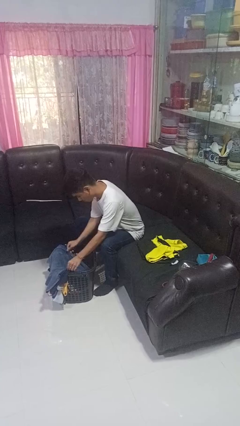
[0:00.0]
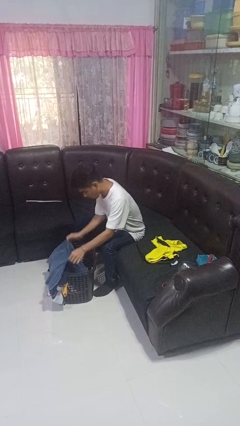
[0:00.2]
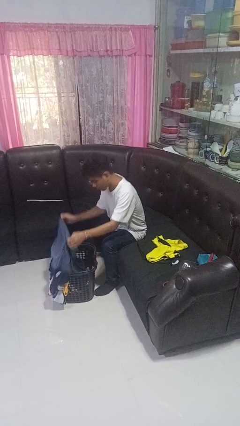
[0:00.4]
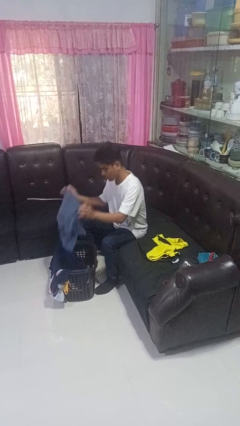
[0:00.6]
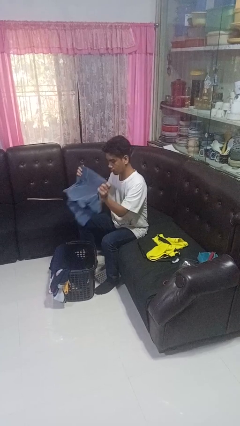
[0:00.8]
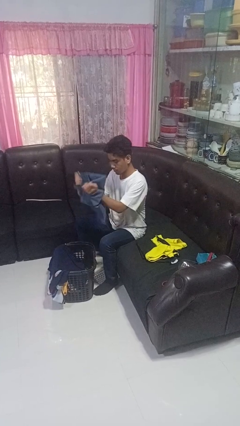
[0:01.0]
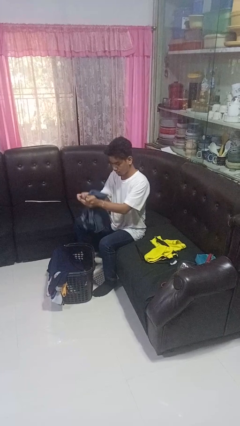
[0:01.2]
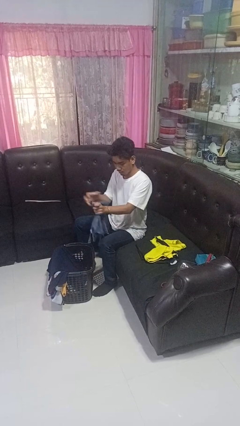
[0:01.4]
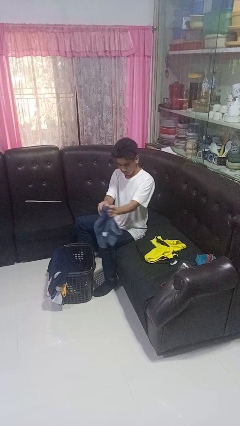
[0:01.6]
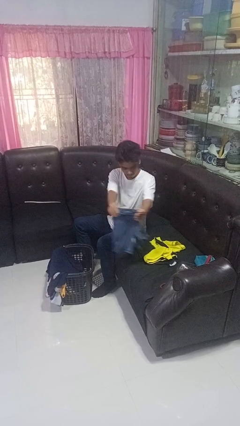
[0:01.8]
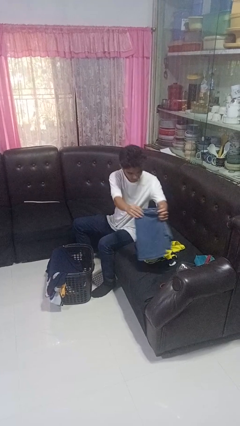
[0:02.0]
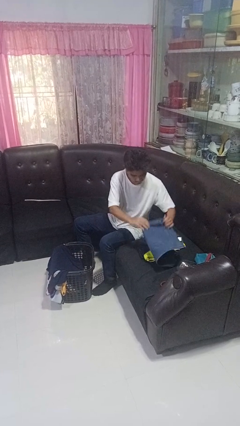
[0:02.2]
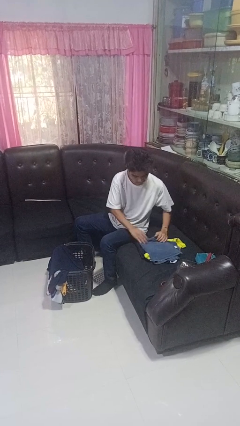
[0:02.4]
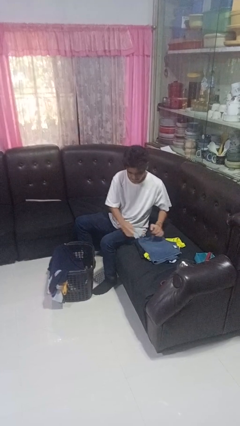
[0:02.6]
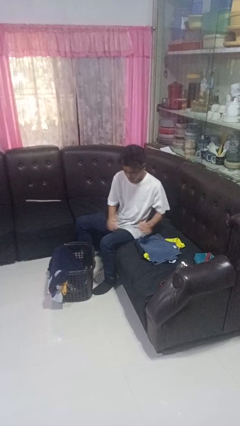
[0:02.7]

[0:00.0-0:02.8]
person folds shirt

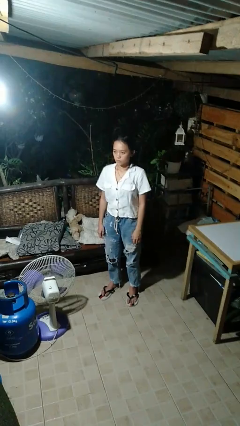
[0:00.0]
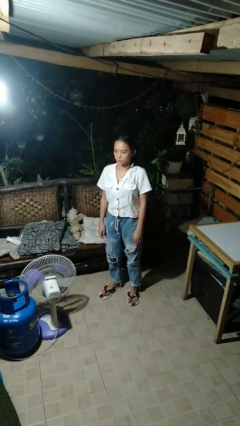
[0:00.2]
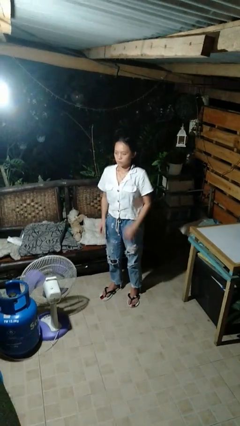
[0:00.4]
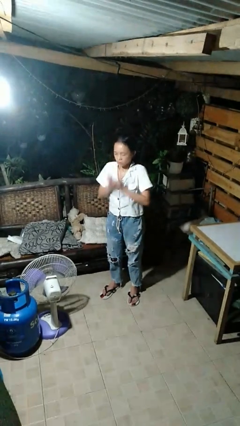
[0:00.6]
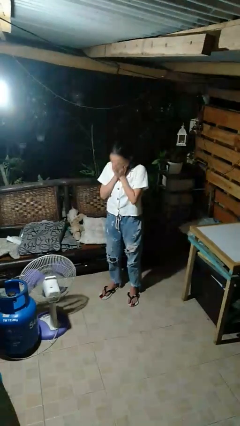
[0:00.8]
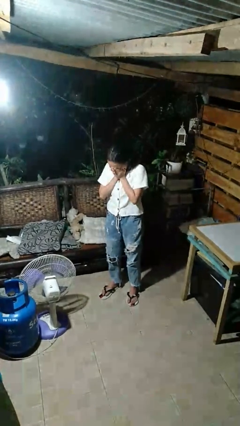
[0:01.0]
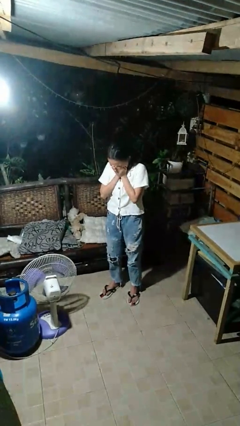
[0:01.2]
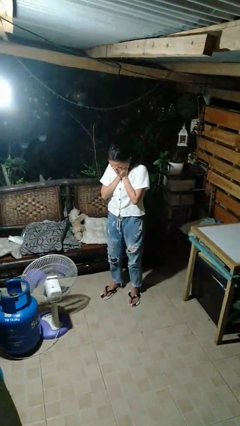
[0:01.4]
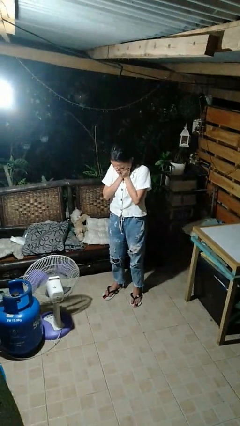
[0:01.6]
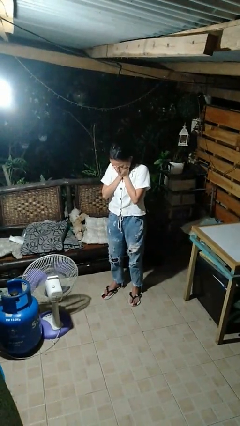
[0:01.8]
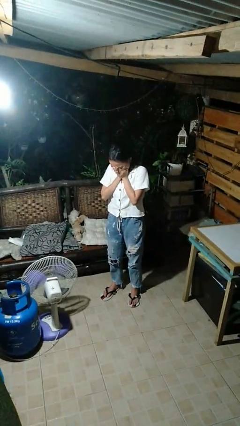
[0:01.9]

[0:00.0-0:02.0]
person sneezes into hand

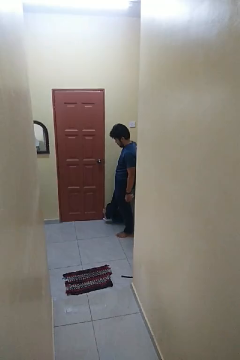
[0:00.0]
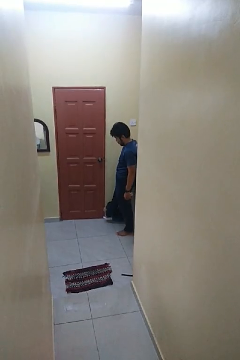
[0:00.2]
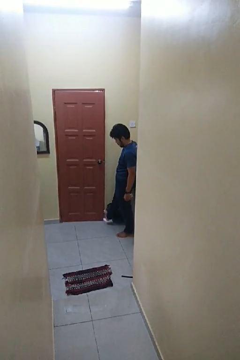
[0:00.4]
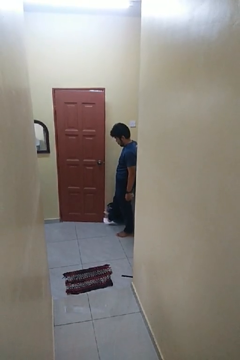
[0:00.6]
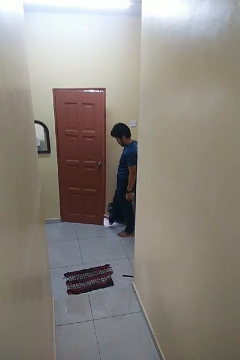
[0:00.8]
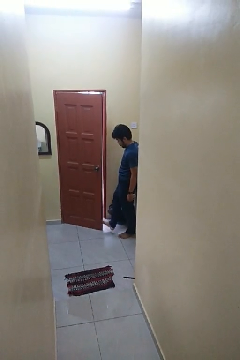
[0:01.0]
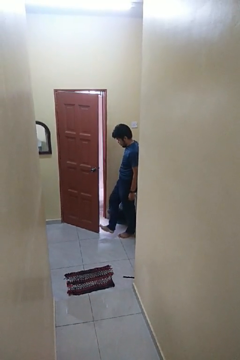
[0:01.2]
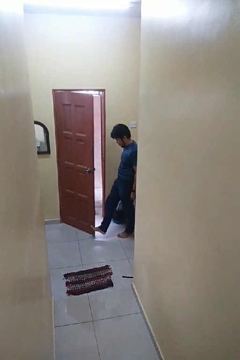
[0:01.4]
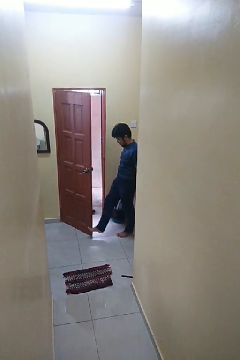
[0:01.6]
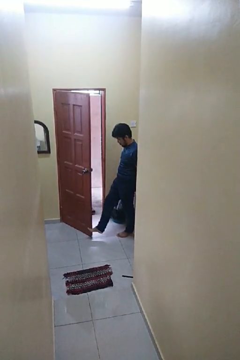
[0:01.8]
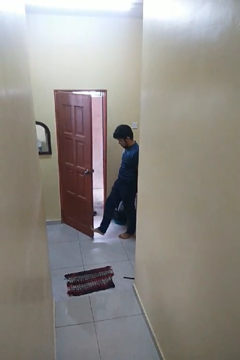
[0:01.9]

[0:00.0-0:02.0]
person opens facility door

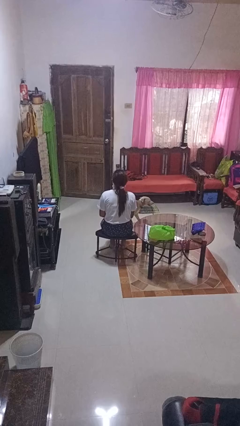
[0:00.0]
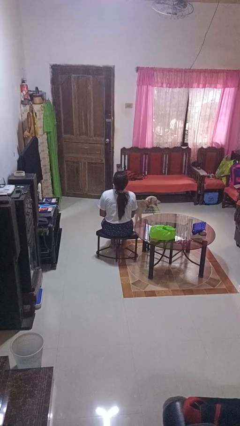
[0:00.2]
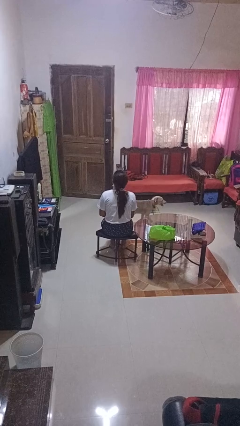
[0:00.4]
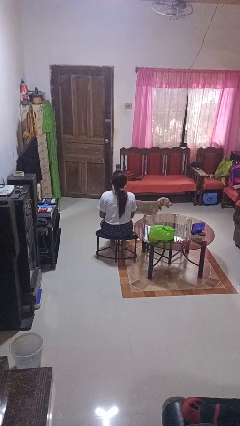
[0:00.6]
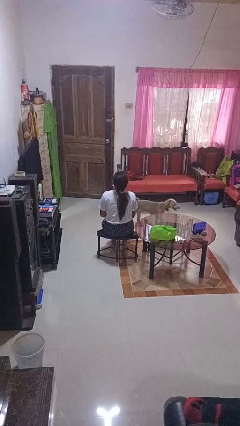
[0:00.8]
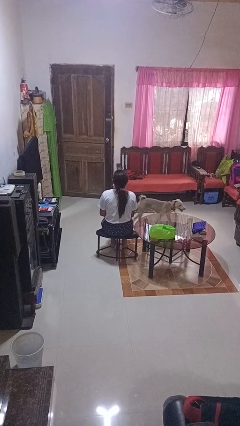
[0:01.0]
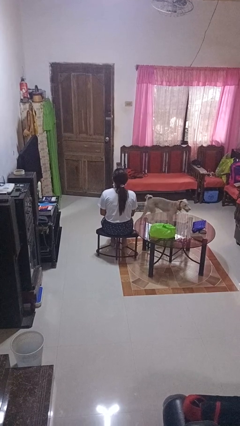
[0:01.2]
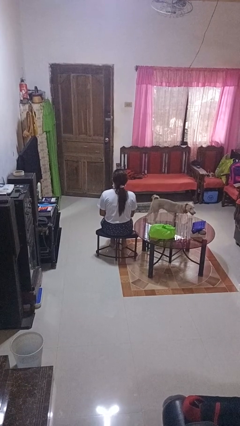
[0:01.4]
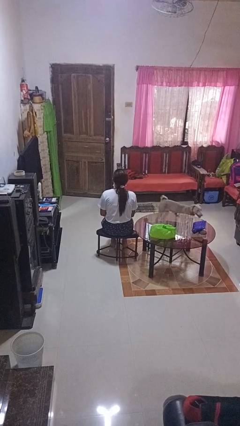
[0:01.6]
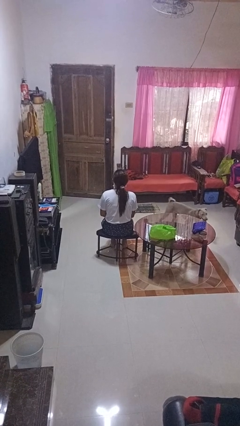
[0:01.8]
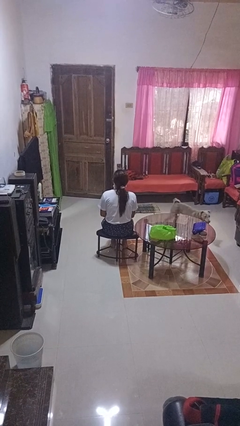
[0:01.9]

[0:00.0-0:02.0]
person nods head

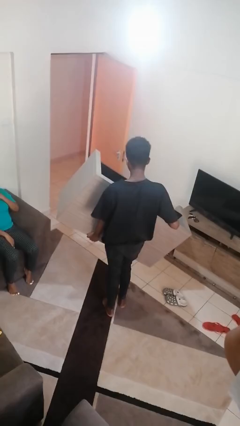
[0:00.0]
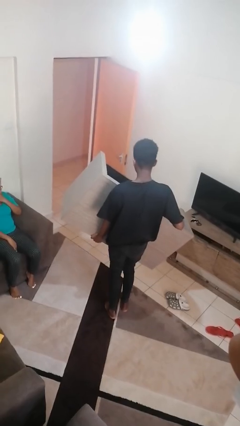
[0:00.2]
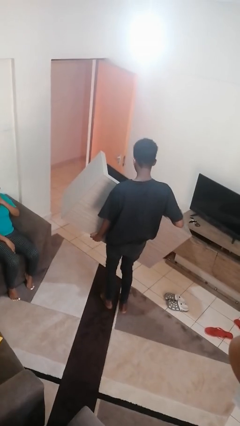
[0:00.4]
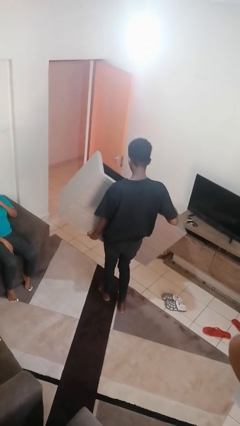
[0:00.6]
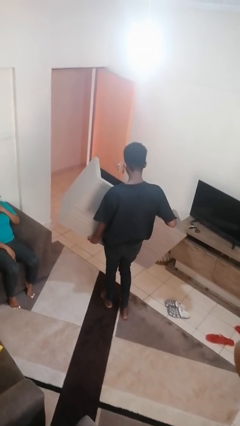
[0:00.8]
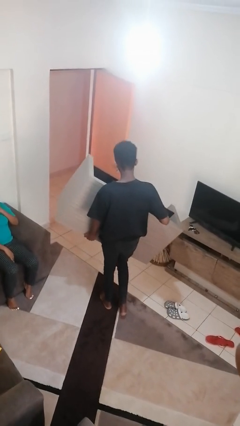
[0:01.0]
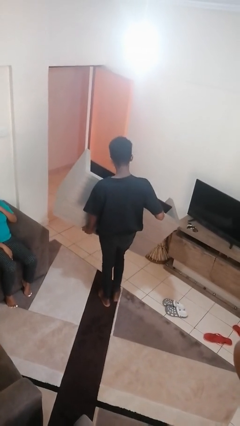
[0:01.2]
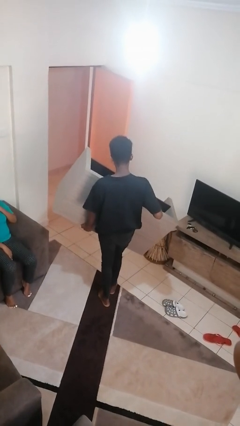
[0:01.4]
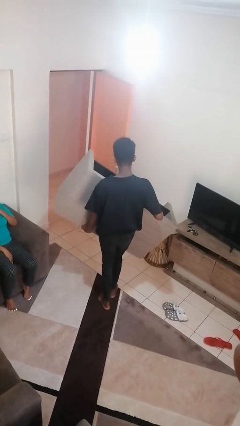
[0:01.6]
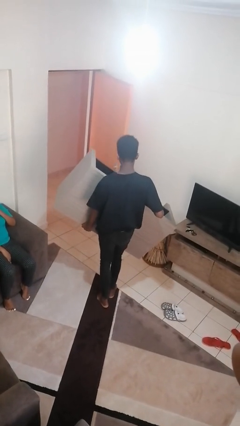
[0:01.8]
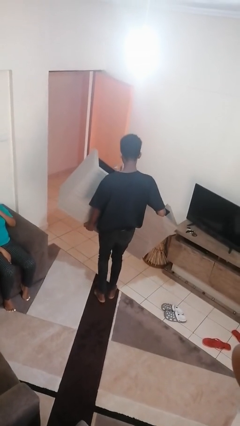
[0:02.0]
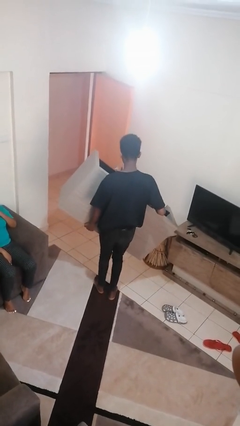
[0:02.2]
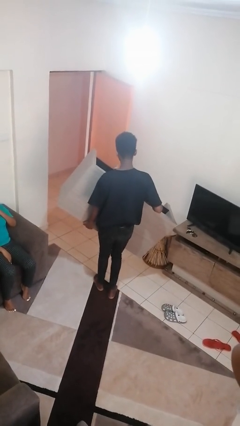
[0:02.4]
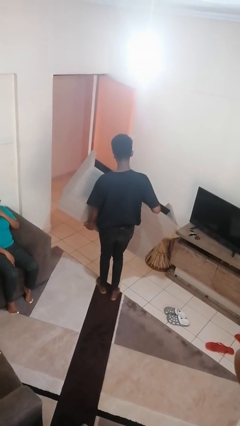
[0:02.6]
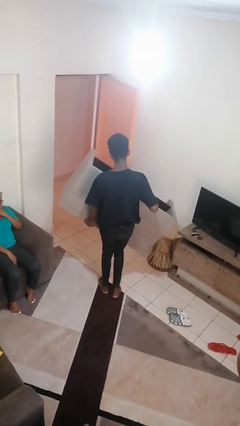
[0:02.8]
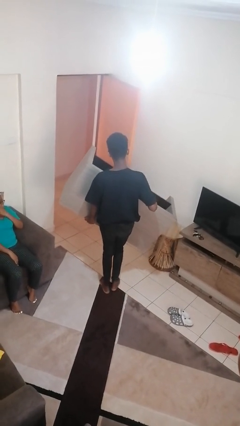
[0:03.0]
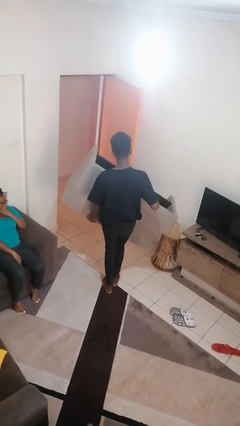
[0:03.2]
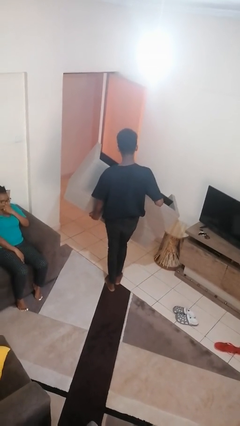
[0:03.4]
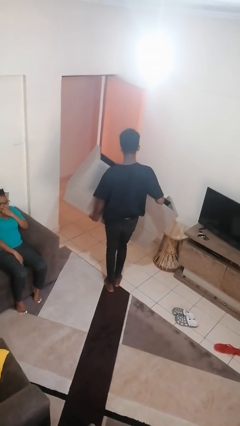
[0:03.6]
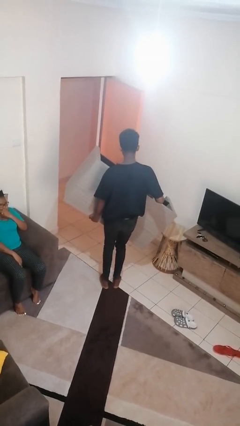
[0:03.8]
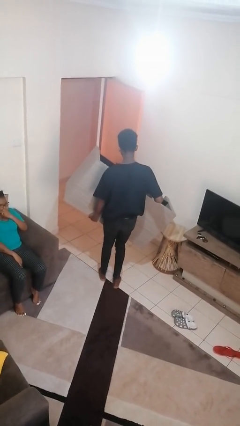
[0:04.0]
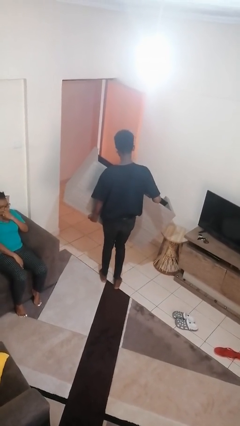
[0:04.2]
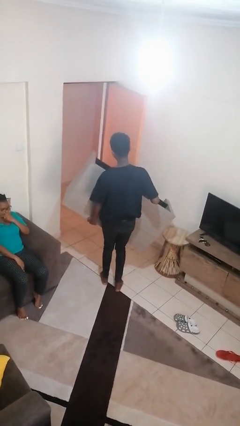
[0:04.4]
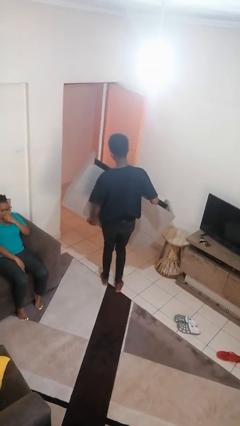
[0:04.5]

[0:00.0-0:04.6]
person carries furniture

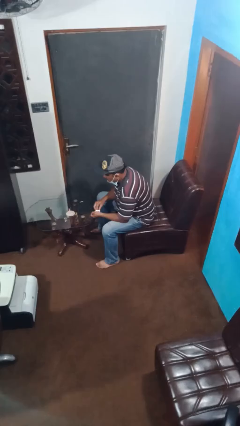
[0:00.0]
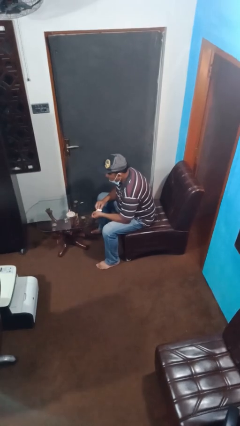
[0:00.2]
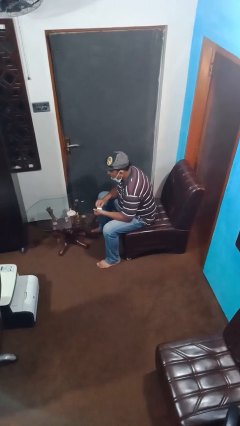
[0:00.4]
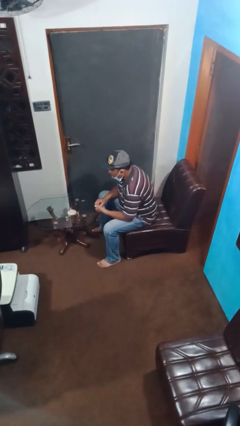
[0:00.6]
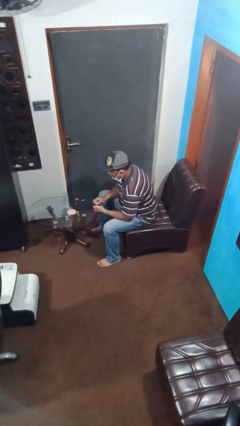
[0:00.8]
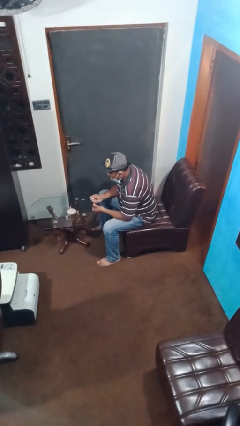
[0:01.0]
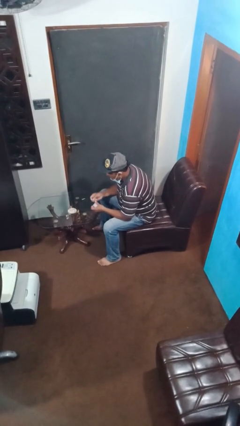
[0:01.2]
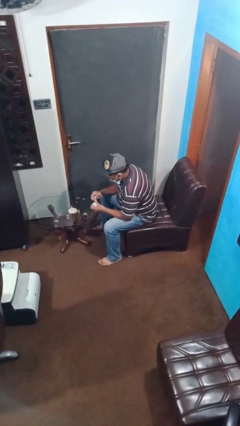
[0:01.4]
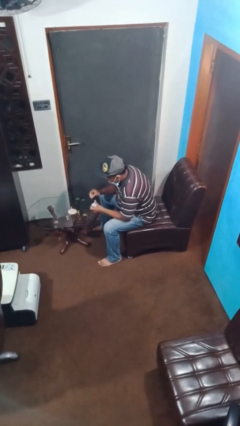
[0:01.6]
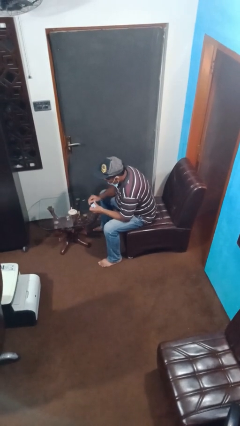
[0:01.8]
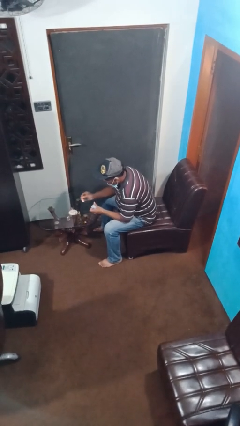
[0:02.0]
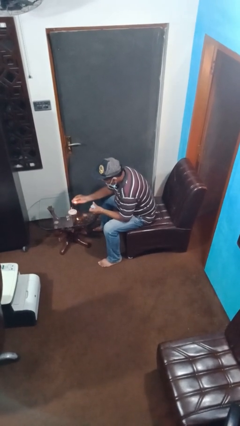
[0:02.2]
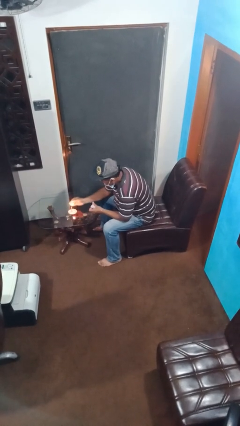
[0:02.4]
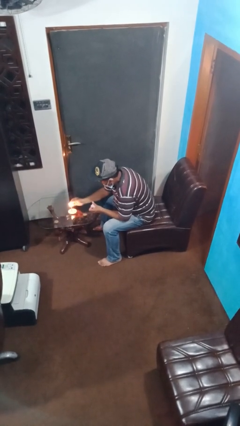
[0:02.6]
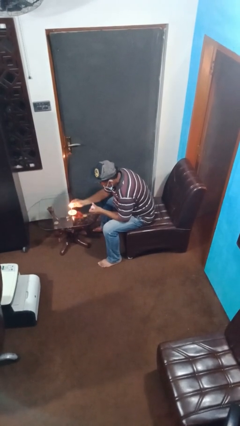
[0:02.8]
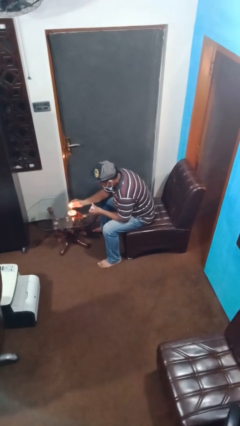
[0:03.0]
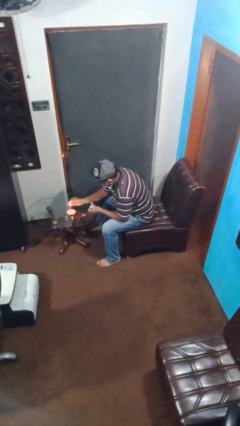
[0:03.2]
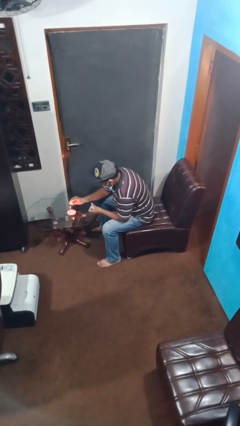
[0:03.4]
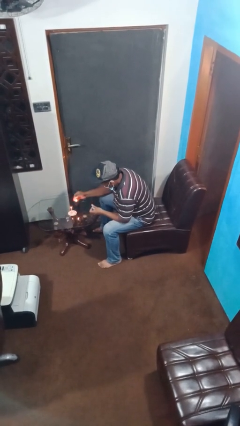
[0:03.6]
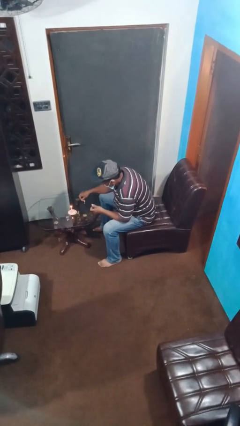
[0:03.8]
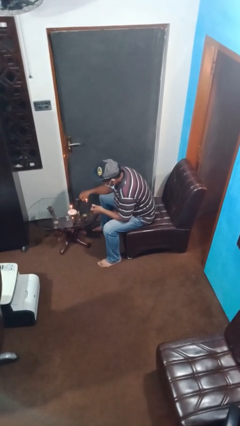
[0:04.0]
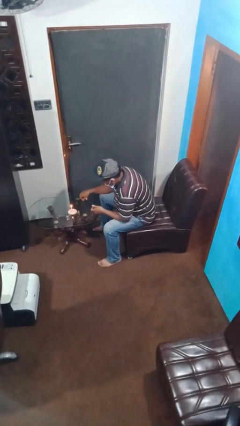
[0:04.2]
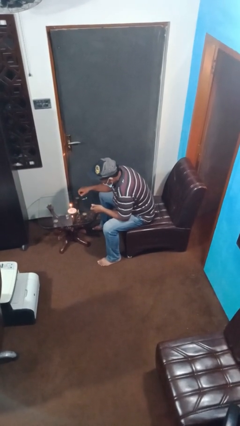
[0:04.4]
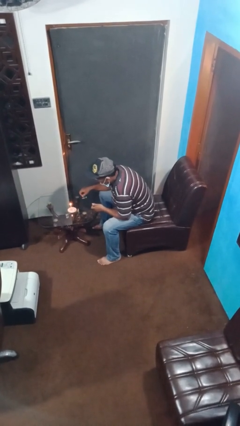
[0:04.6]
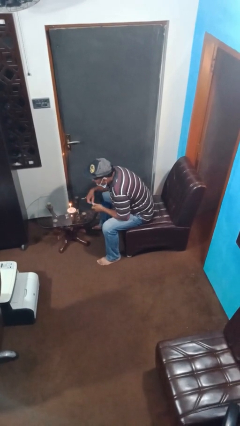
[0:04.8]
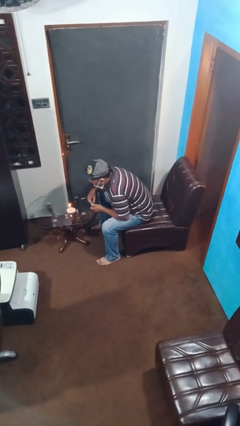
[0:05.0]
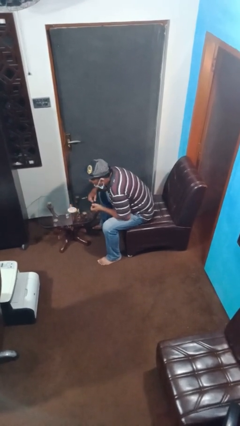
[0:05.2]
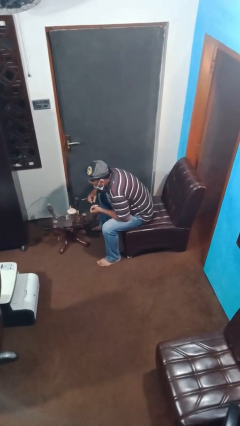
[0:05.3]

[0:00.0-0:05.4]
person lights candle
